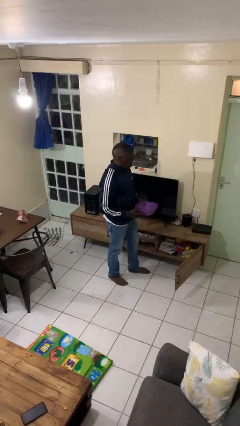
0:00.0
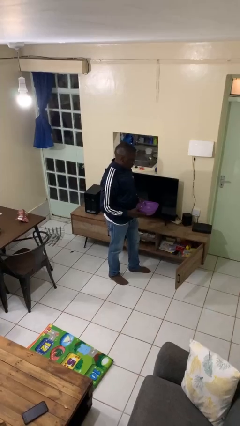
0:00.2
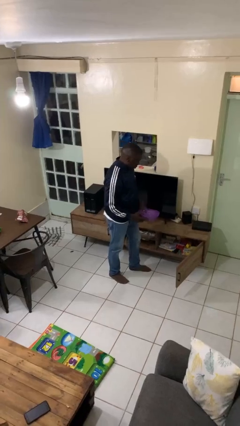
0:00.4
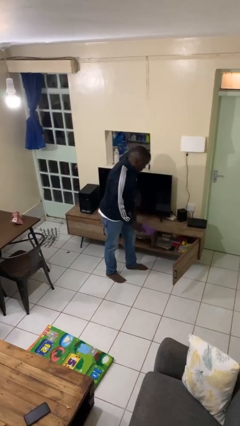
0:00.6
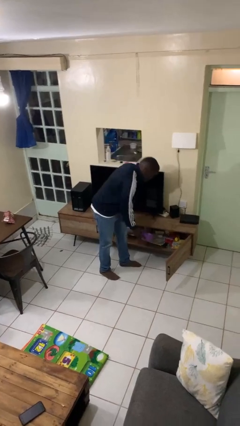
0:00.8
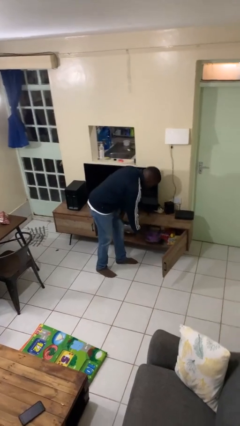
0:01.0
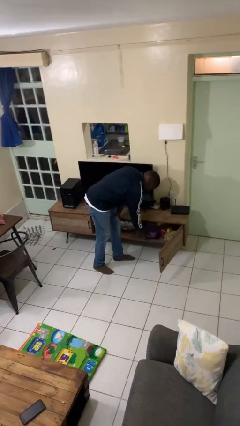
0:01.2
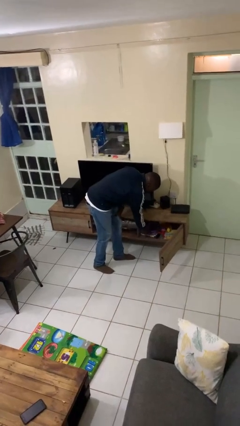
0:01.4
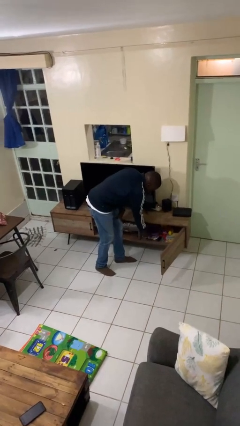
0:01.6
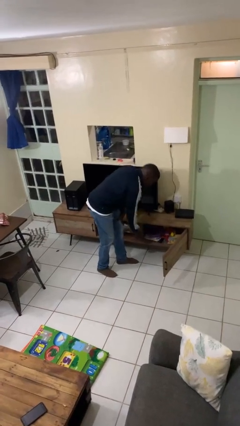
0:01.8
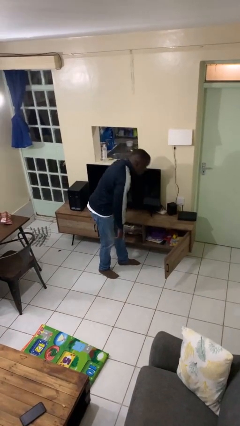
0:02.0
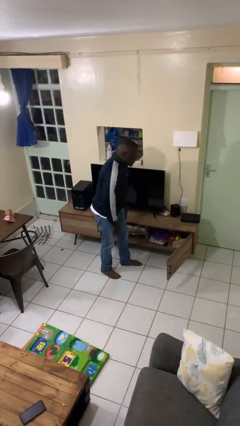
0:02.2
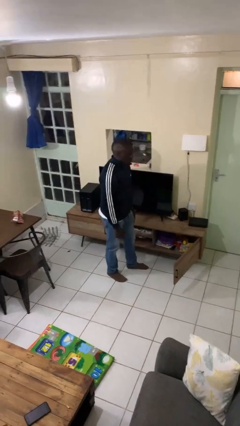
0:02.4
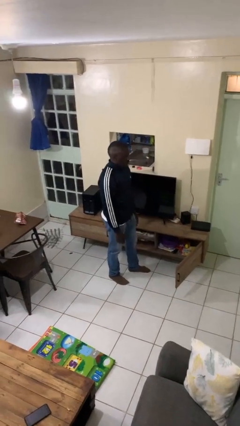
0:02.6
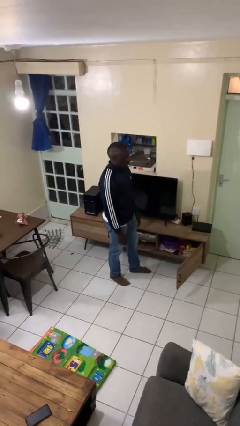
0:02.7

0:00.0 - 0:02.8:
person puts down object into cabinet

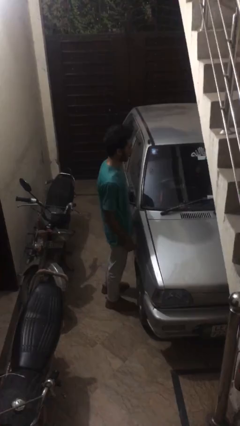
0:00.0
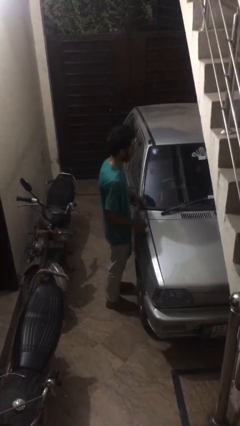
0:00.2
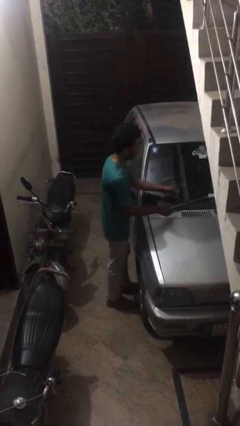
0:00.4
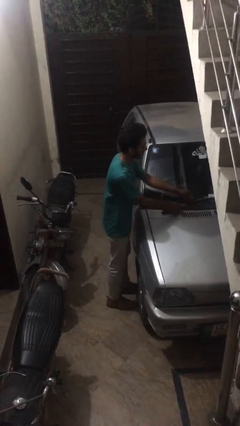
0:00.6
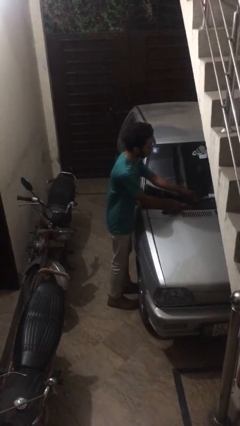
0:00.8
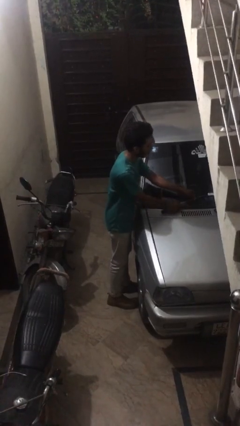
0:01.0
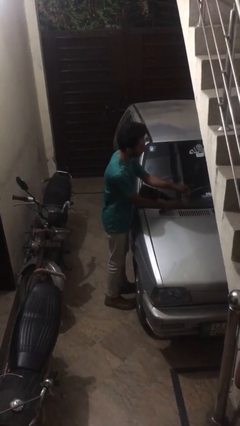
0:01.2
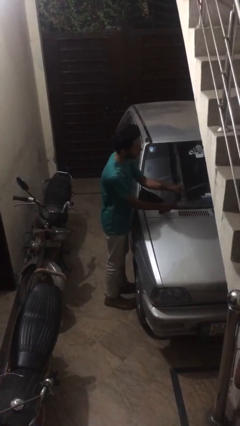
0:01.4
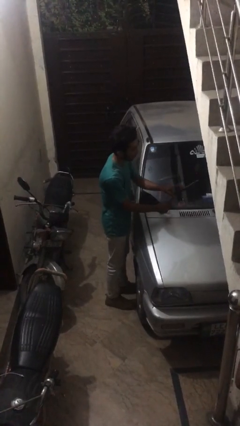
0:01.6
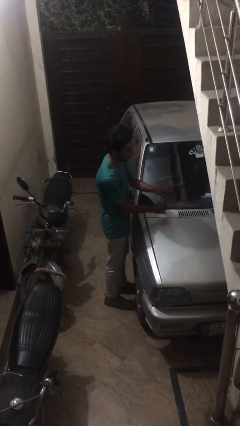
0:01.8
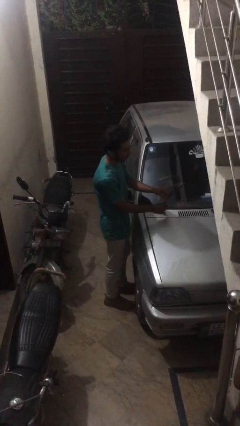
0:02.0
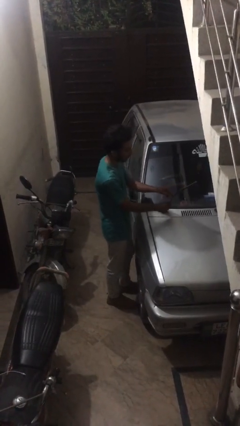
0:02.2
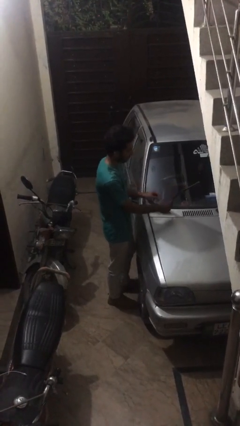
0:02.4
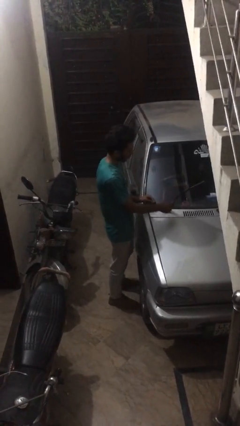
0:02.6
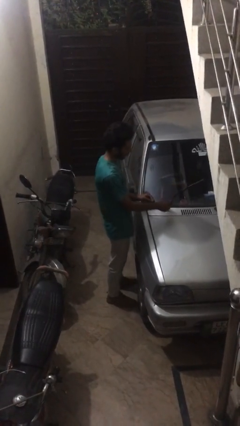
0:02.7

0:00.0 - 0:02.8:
person flips up car wipers

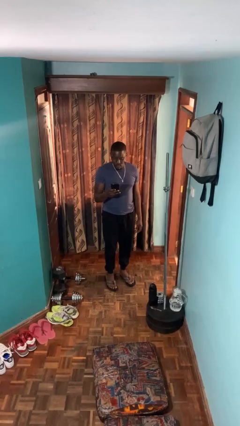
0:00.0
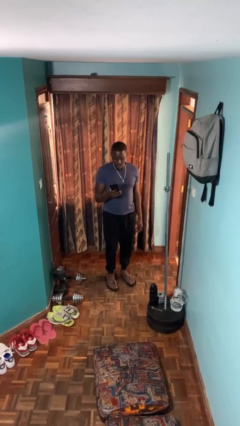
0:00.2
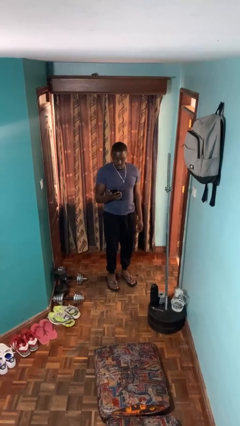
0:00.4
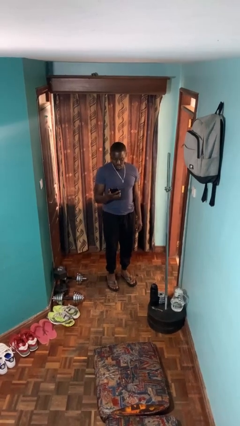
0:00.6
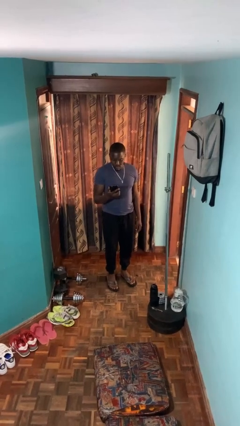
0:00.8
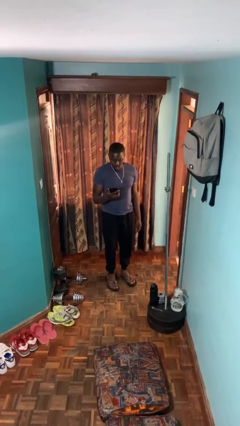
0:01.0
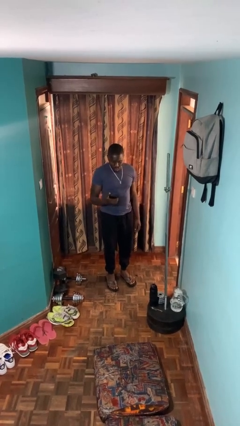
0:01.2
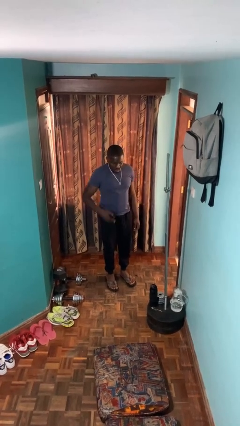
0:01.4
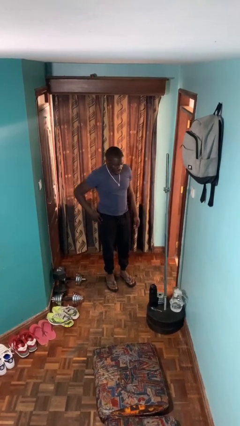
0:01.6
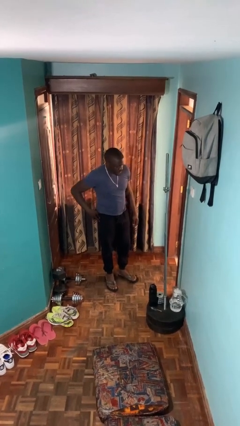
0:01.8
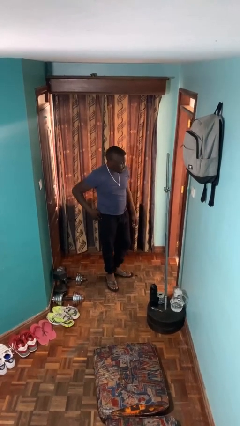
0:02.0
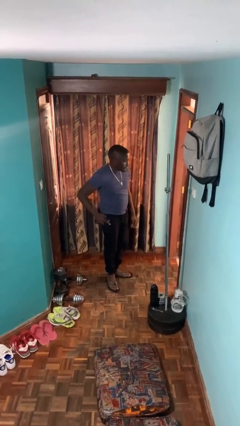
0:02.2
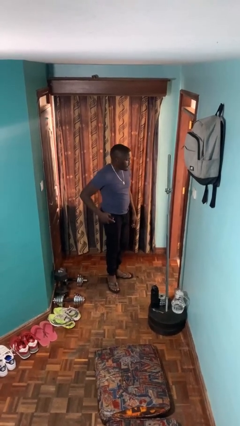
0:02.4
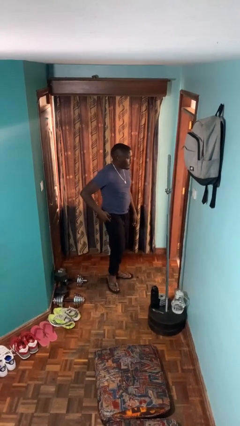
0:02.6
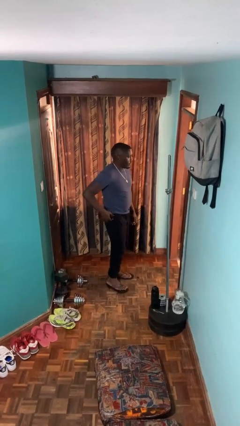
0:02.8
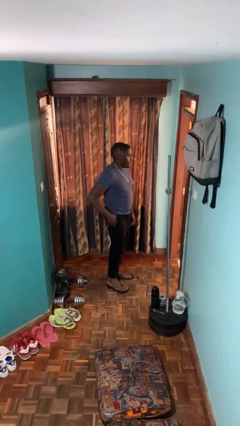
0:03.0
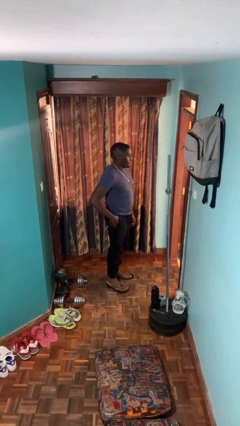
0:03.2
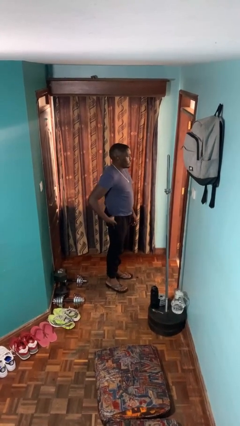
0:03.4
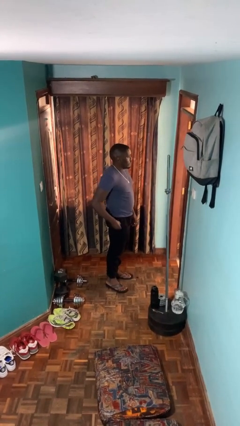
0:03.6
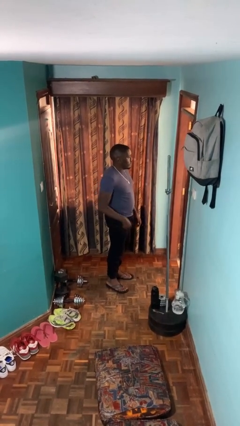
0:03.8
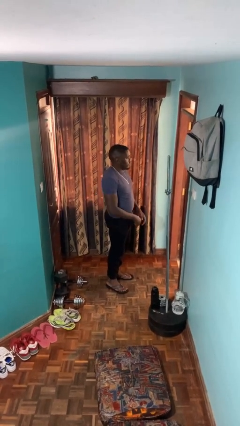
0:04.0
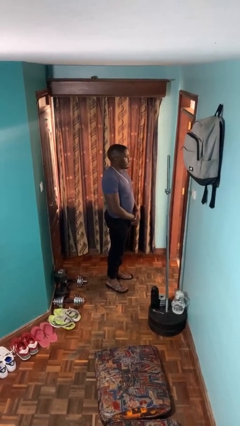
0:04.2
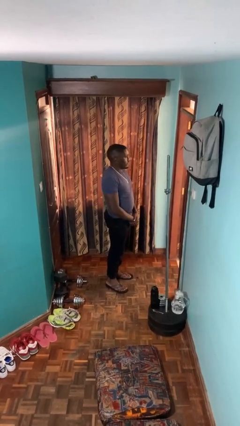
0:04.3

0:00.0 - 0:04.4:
person puts phone into pocket

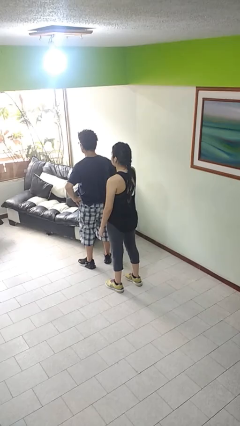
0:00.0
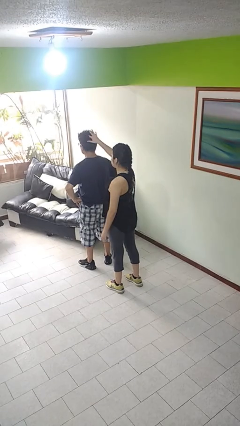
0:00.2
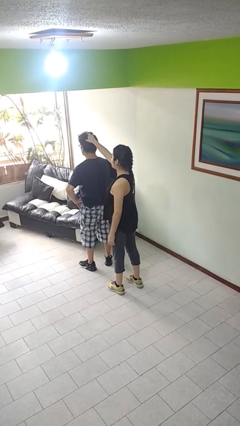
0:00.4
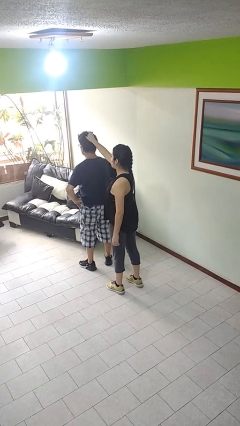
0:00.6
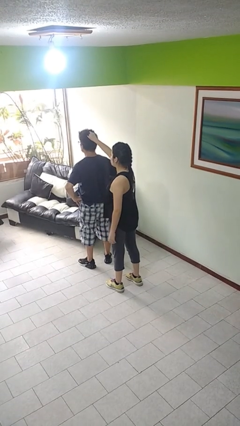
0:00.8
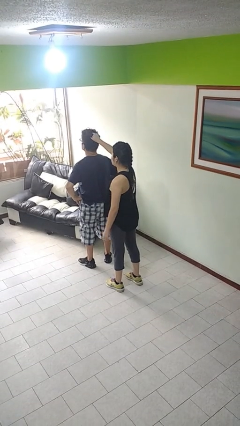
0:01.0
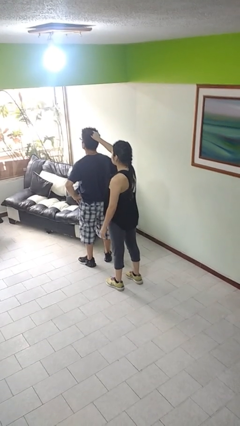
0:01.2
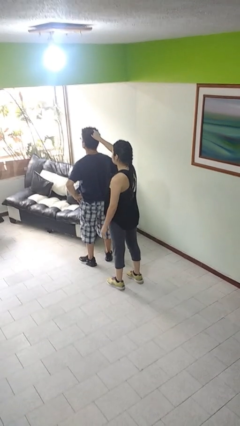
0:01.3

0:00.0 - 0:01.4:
person grabs person by hair

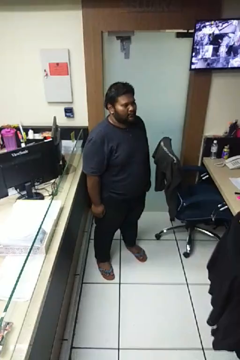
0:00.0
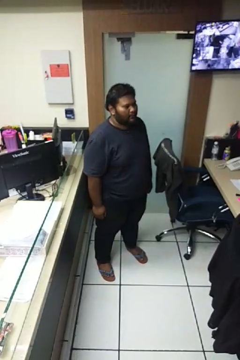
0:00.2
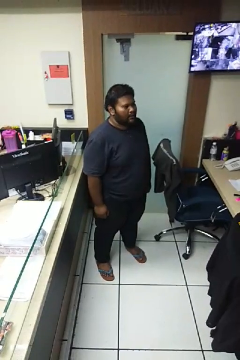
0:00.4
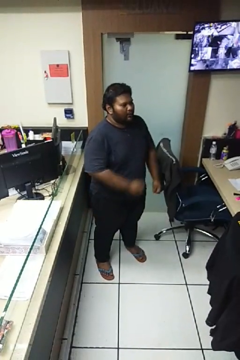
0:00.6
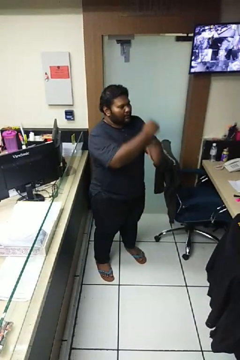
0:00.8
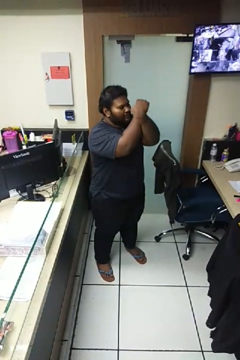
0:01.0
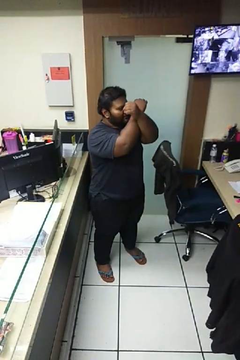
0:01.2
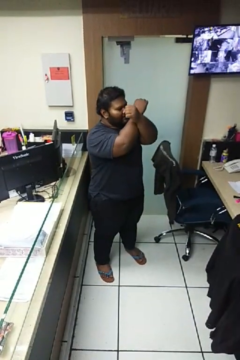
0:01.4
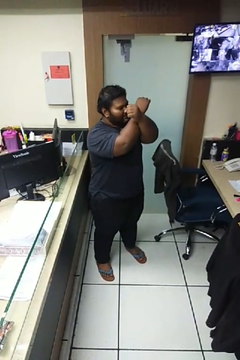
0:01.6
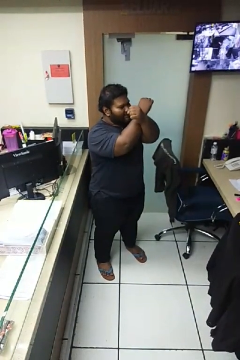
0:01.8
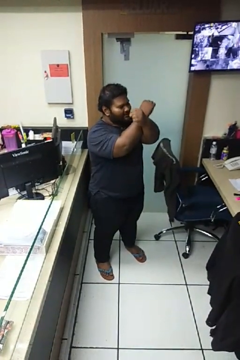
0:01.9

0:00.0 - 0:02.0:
person gestures arms x

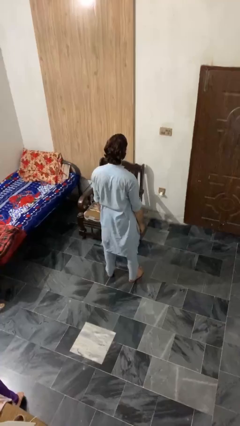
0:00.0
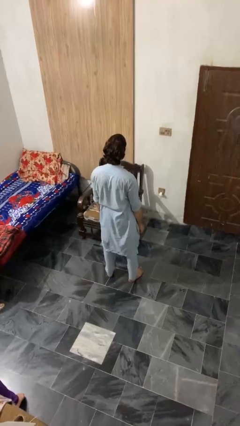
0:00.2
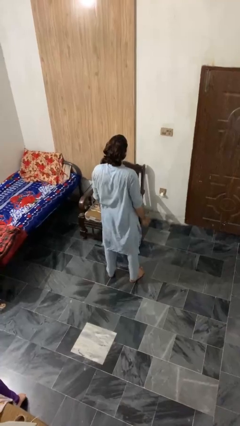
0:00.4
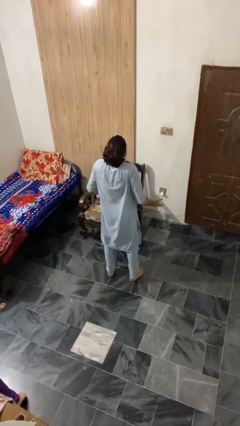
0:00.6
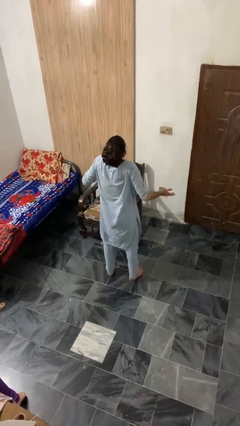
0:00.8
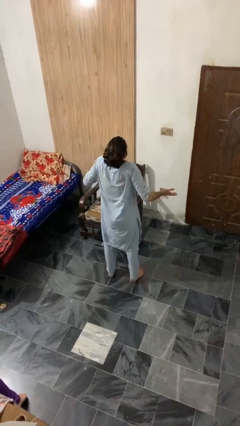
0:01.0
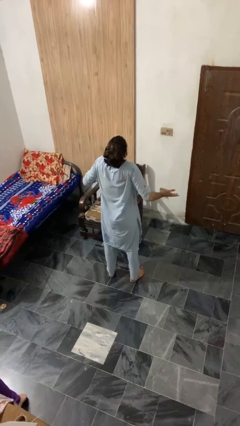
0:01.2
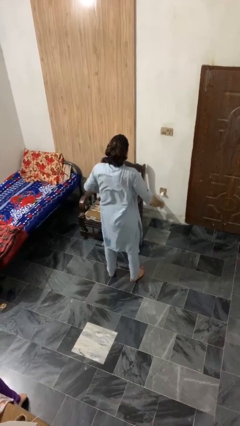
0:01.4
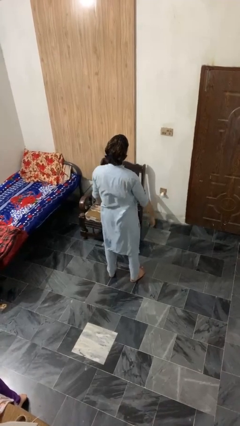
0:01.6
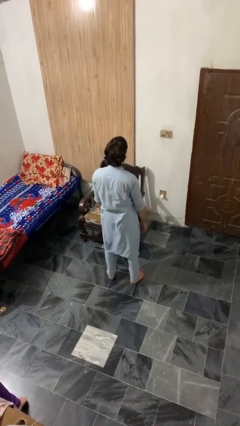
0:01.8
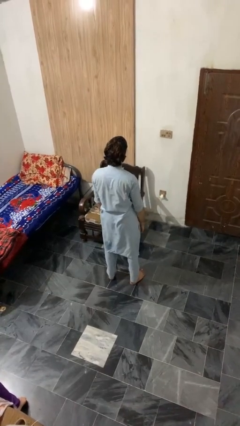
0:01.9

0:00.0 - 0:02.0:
person shrugs

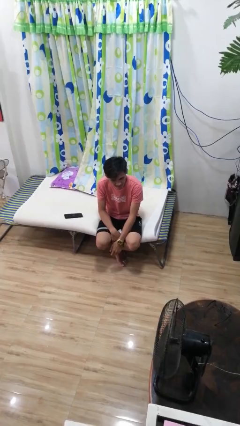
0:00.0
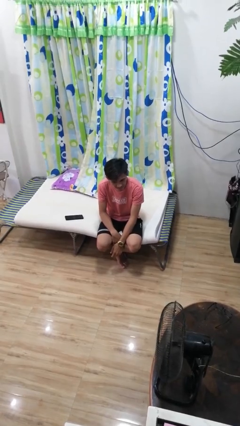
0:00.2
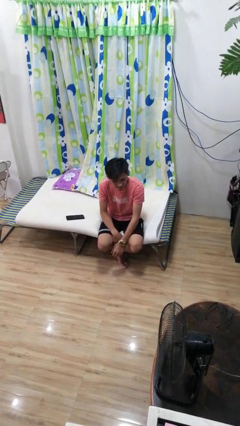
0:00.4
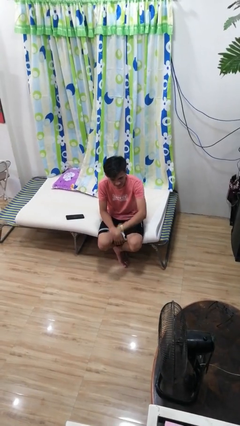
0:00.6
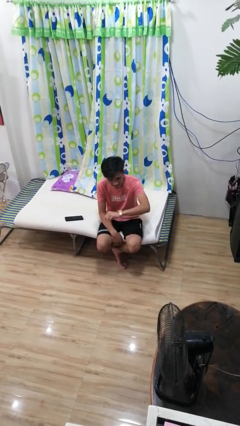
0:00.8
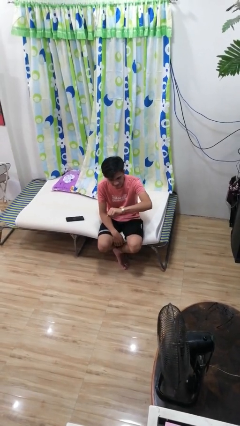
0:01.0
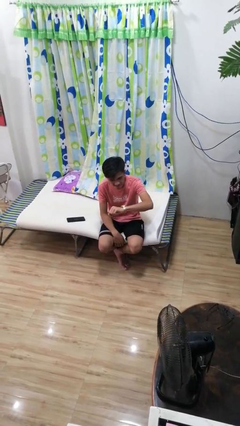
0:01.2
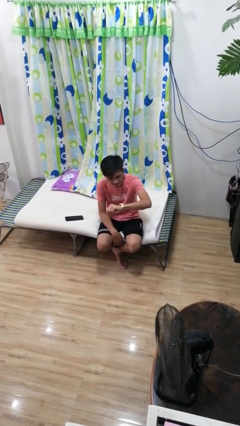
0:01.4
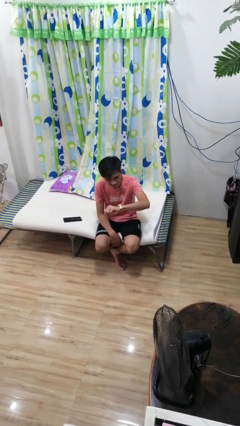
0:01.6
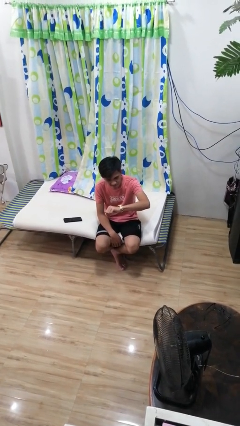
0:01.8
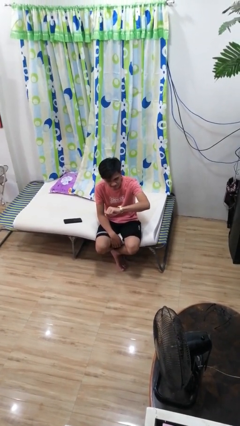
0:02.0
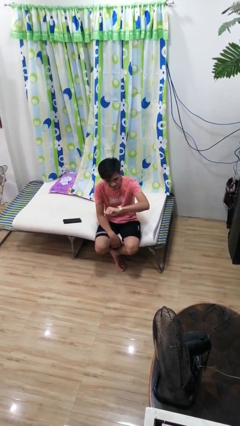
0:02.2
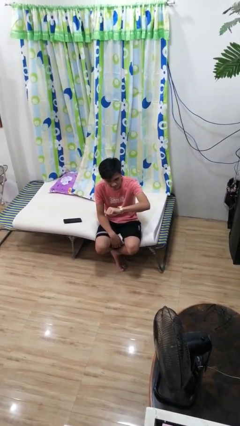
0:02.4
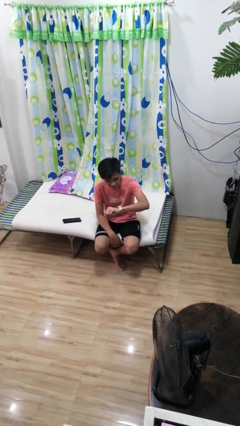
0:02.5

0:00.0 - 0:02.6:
person looks at wristwatch
